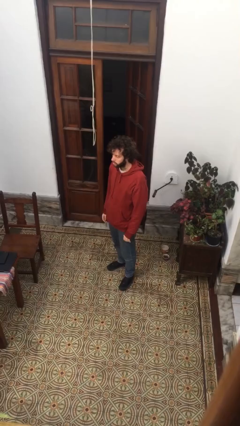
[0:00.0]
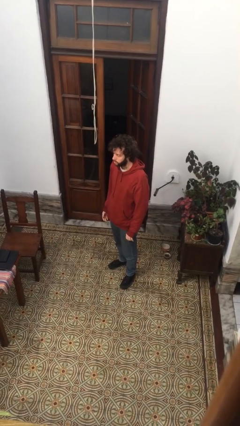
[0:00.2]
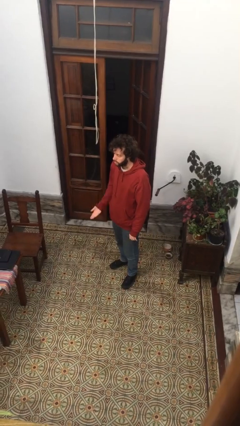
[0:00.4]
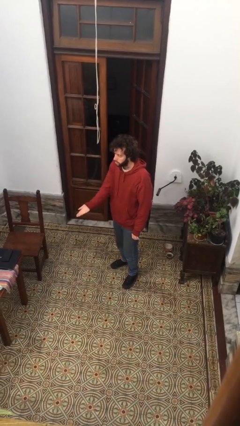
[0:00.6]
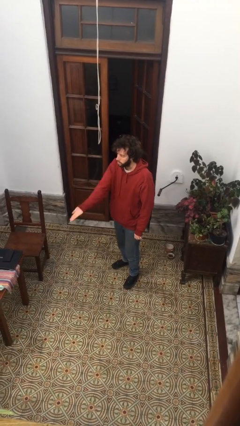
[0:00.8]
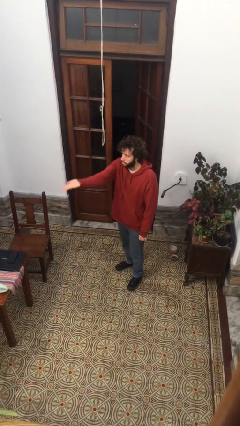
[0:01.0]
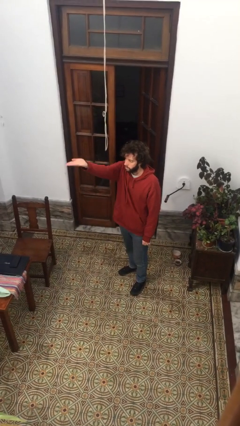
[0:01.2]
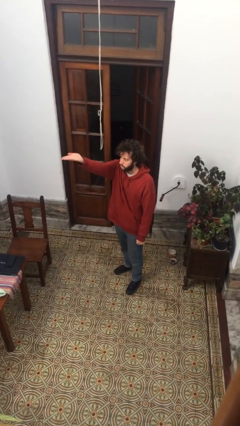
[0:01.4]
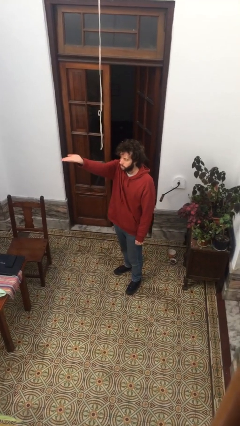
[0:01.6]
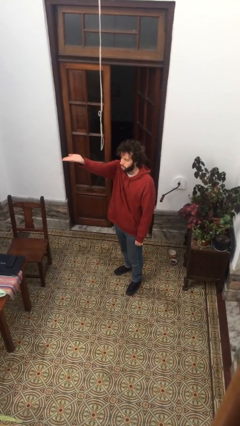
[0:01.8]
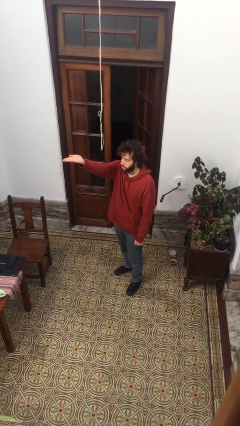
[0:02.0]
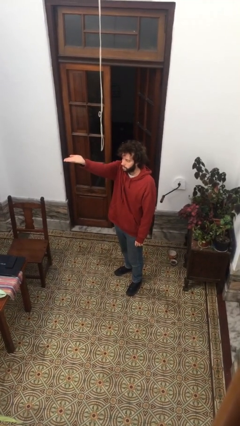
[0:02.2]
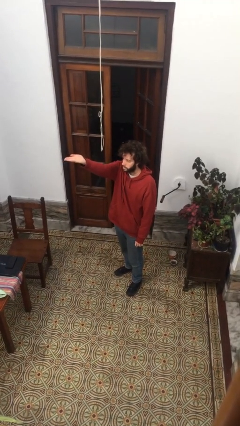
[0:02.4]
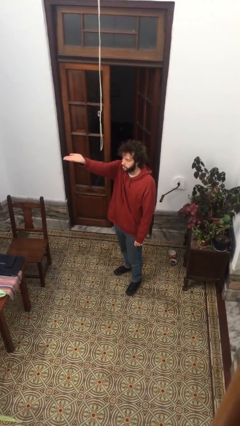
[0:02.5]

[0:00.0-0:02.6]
person gestures swipe up

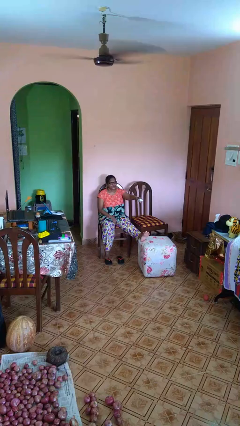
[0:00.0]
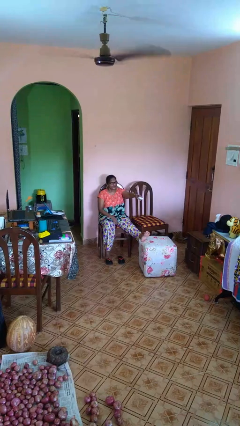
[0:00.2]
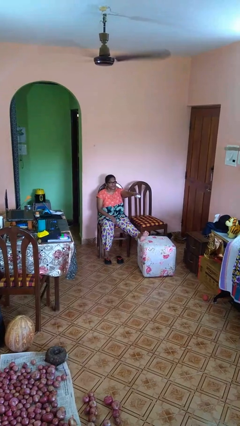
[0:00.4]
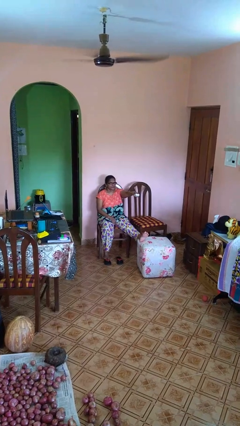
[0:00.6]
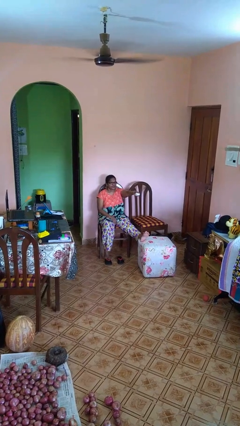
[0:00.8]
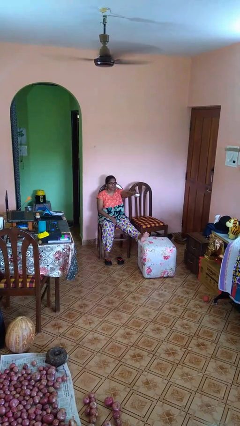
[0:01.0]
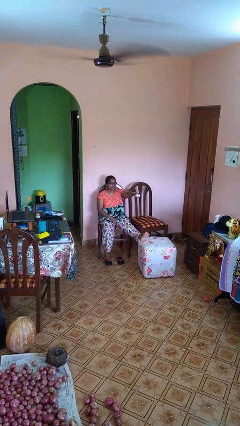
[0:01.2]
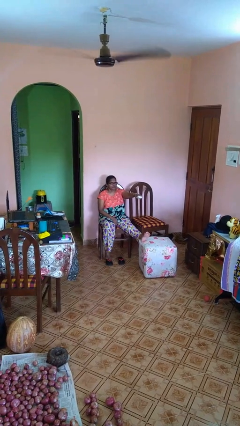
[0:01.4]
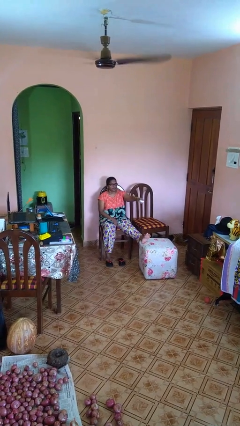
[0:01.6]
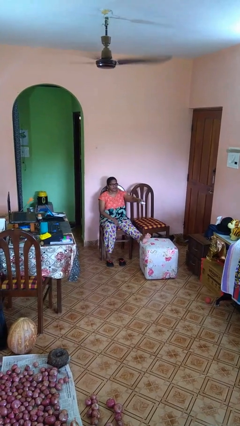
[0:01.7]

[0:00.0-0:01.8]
person uses television remote

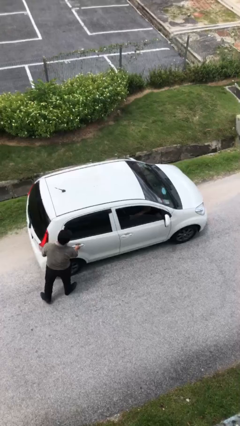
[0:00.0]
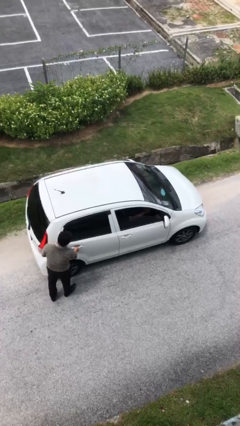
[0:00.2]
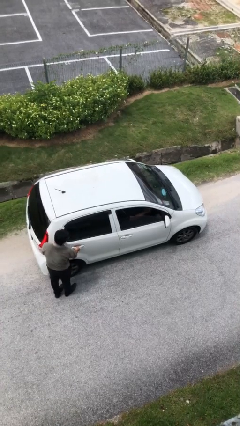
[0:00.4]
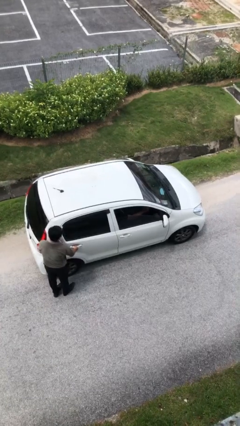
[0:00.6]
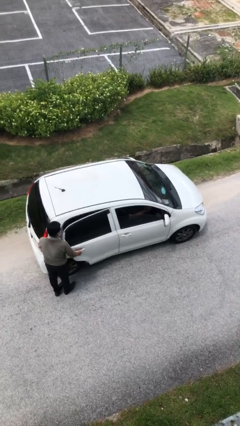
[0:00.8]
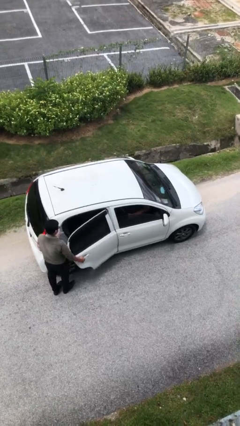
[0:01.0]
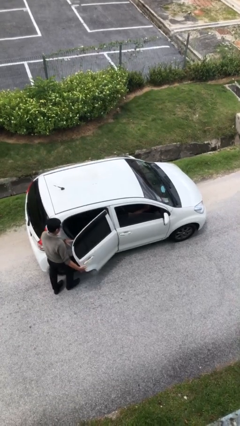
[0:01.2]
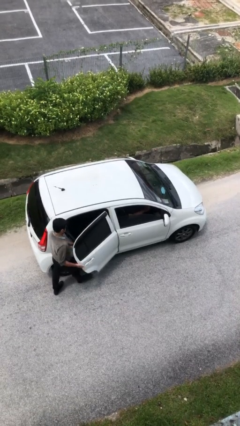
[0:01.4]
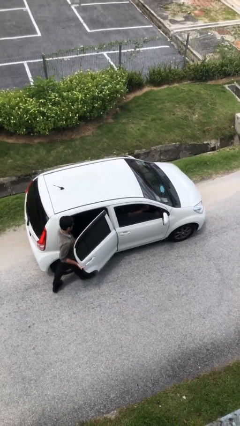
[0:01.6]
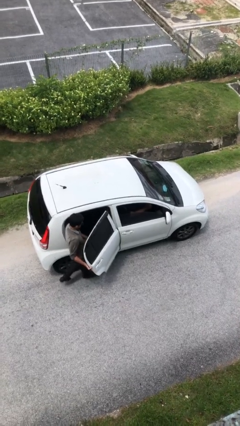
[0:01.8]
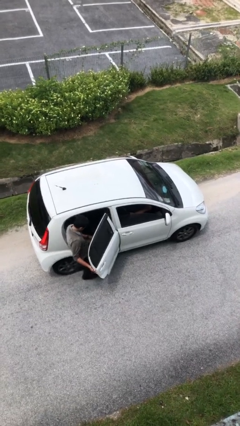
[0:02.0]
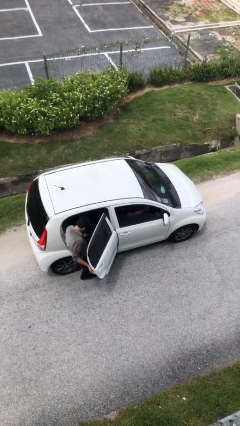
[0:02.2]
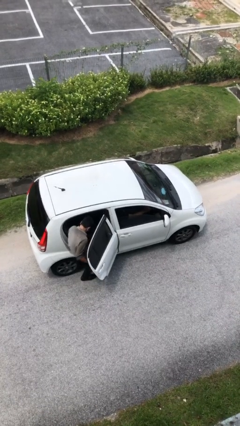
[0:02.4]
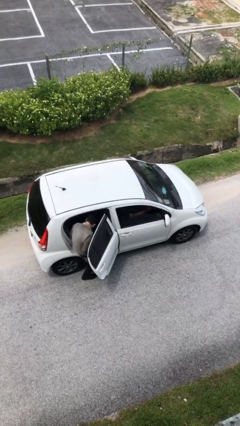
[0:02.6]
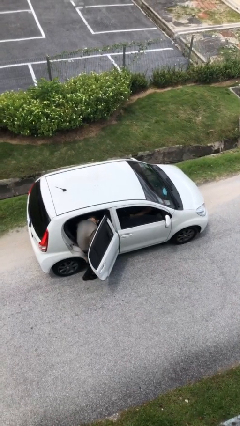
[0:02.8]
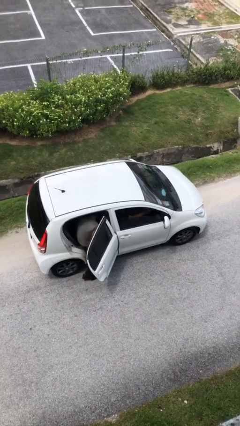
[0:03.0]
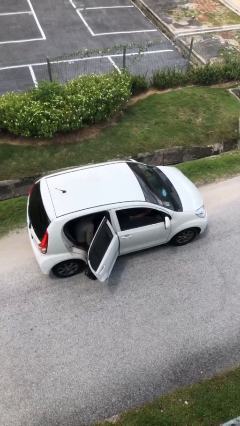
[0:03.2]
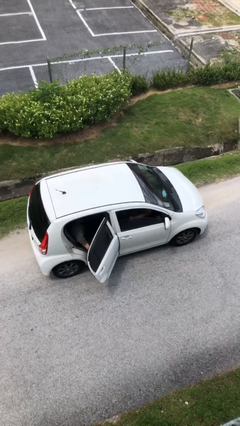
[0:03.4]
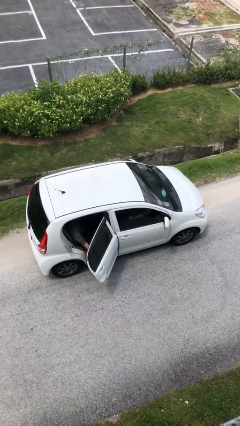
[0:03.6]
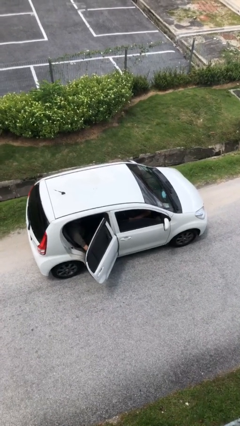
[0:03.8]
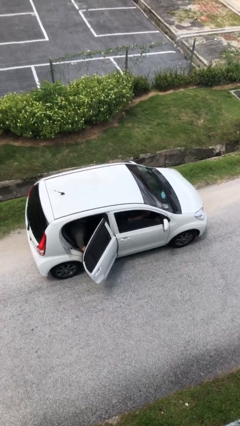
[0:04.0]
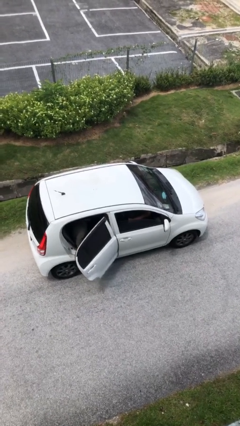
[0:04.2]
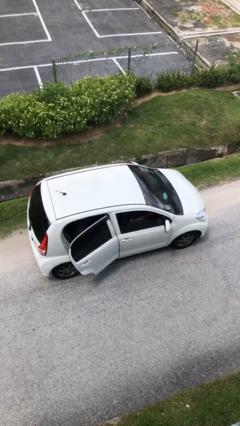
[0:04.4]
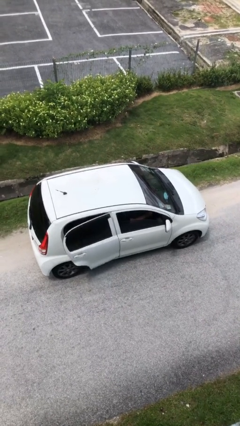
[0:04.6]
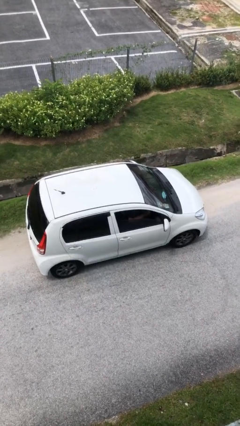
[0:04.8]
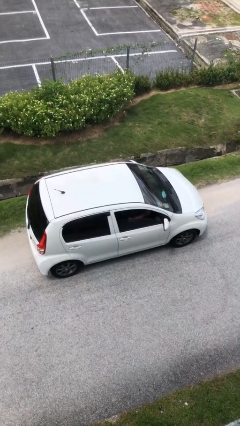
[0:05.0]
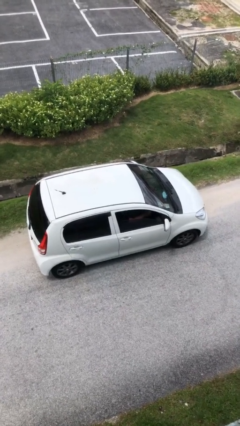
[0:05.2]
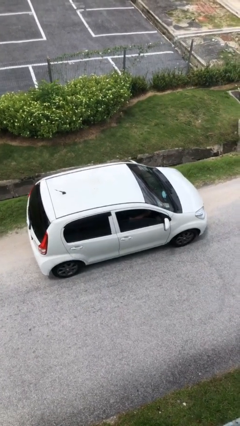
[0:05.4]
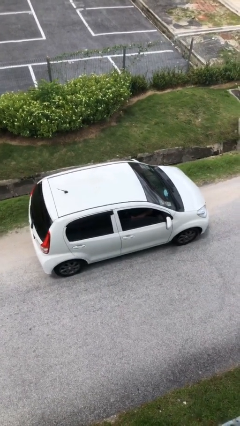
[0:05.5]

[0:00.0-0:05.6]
car picks up person

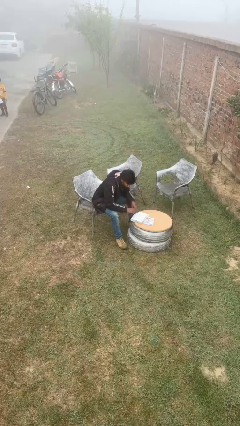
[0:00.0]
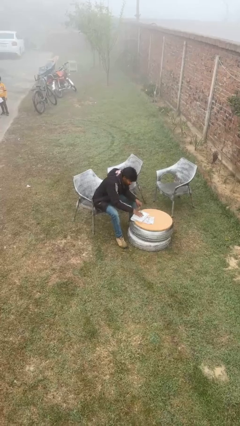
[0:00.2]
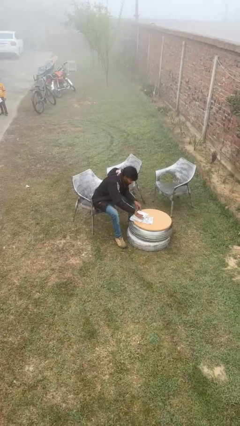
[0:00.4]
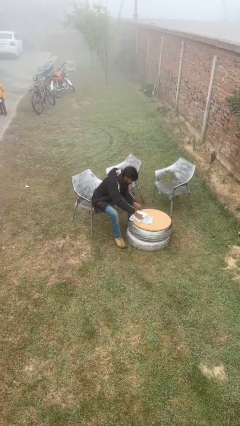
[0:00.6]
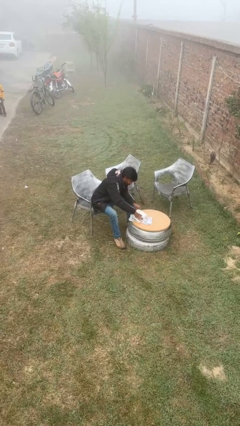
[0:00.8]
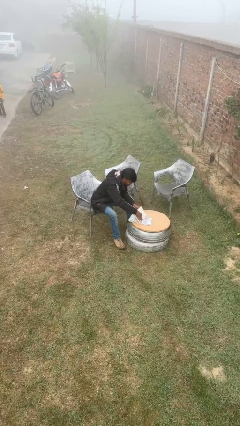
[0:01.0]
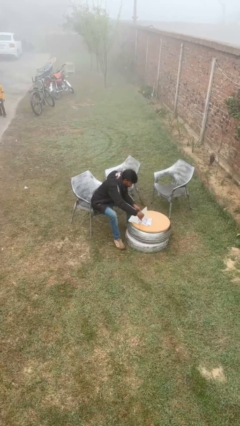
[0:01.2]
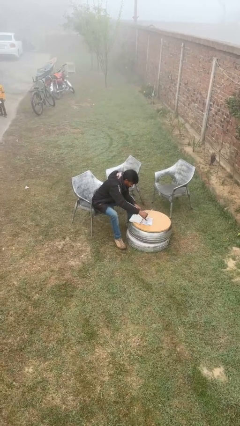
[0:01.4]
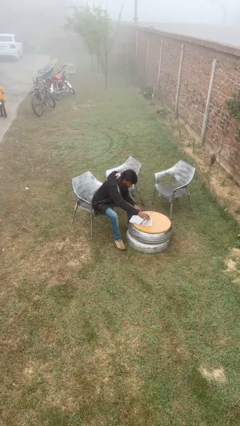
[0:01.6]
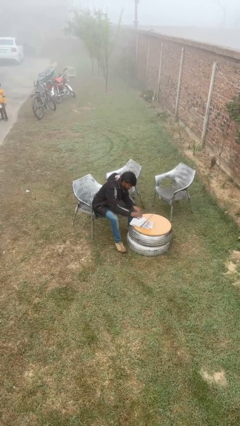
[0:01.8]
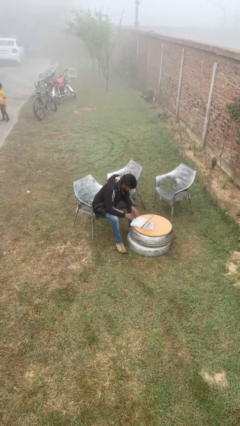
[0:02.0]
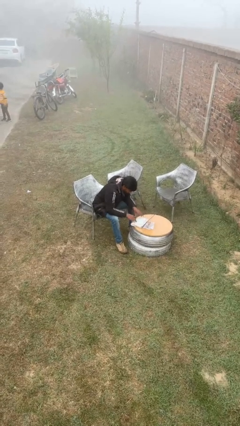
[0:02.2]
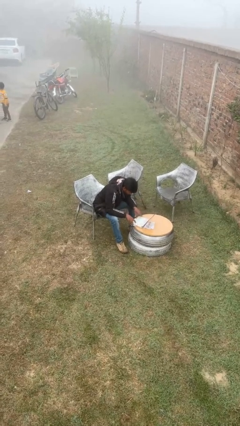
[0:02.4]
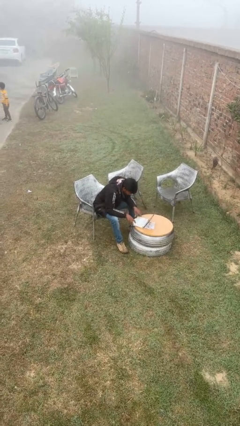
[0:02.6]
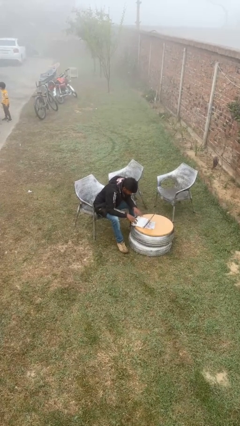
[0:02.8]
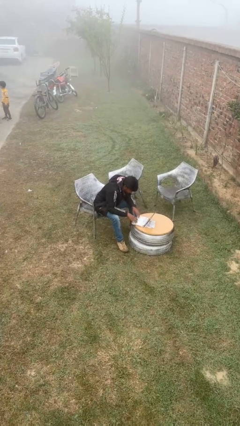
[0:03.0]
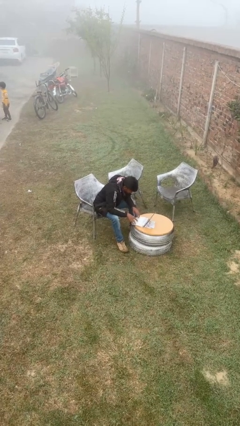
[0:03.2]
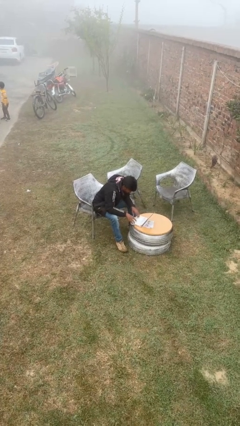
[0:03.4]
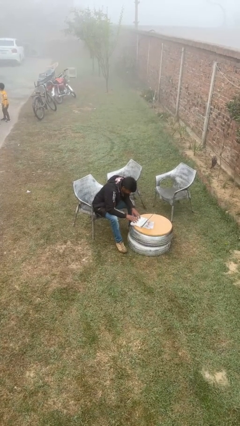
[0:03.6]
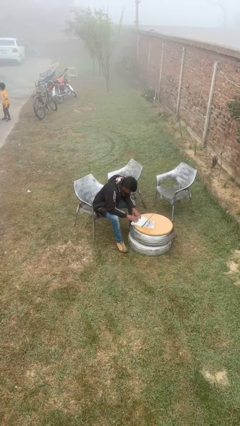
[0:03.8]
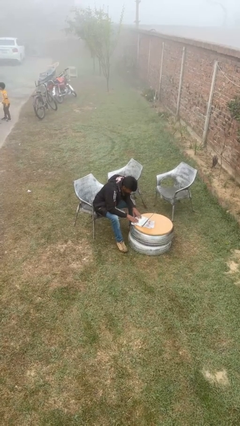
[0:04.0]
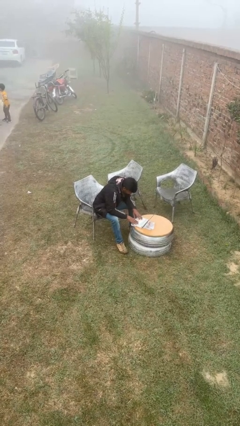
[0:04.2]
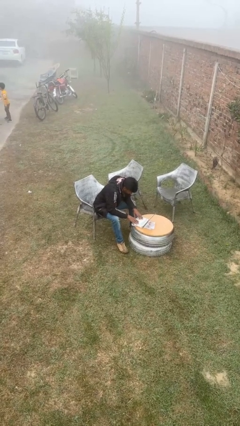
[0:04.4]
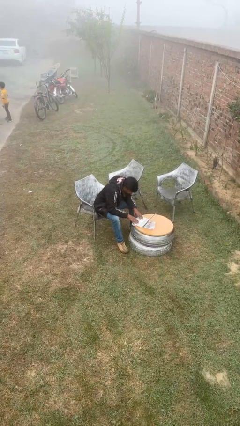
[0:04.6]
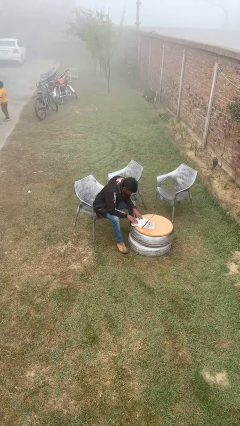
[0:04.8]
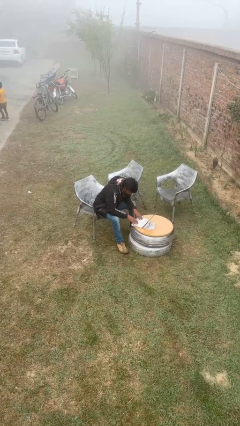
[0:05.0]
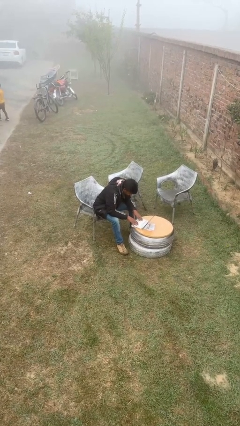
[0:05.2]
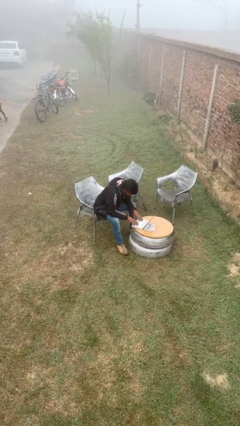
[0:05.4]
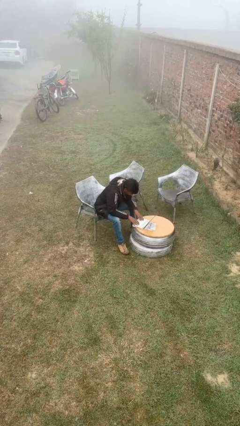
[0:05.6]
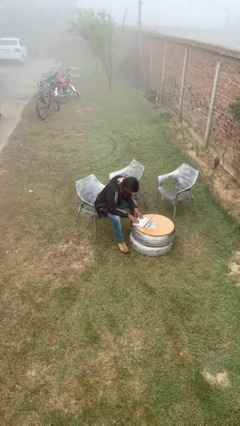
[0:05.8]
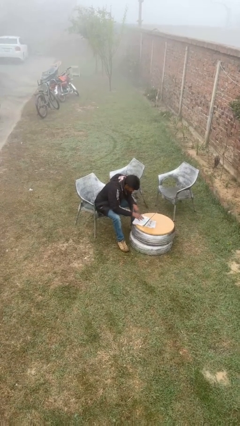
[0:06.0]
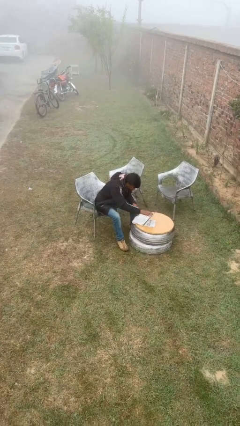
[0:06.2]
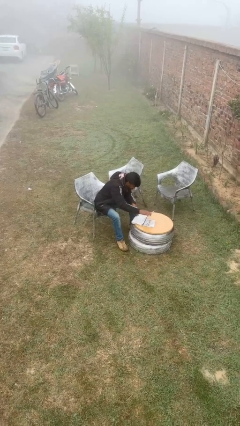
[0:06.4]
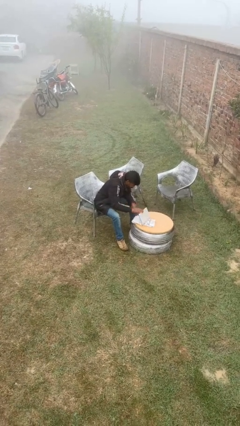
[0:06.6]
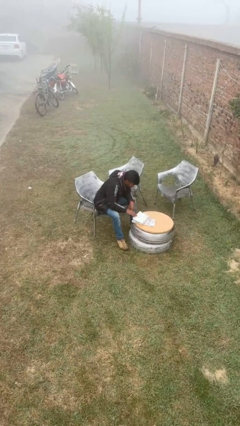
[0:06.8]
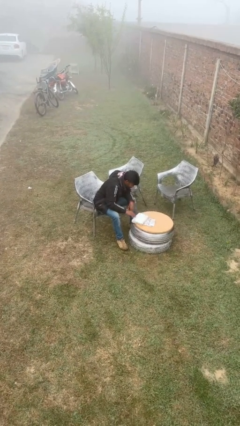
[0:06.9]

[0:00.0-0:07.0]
person interacts with laptop

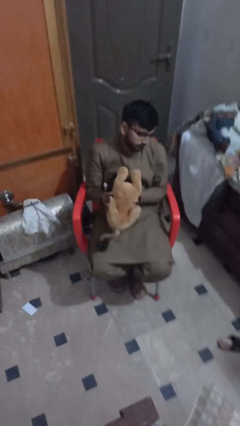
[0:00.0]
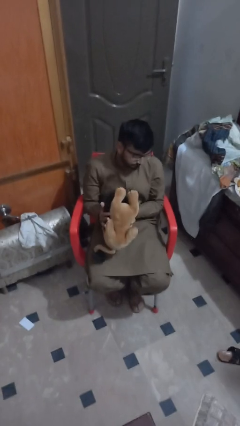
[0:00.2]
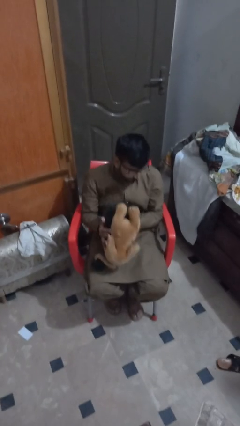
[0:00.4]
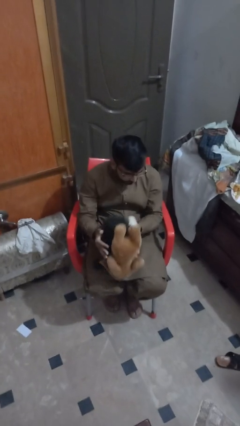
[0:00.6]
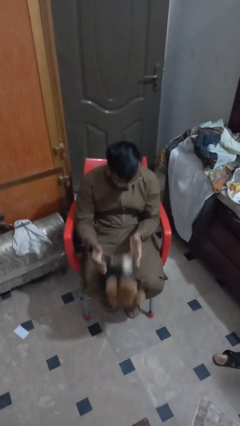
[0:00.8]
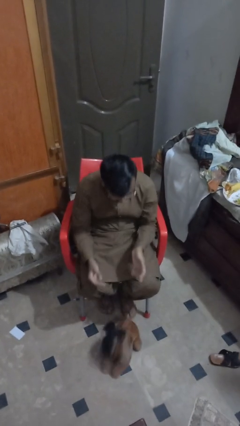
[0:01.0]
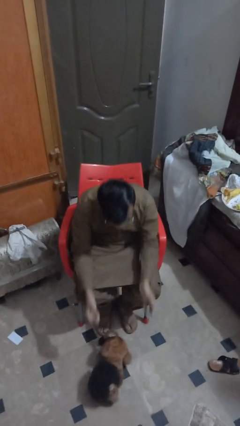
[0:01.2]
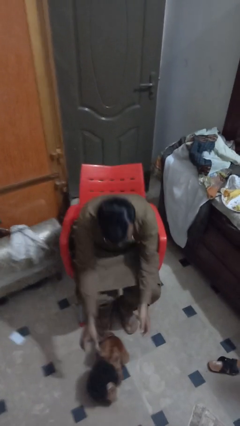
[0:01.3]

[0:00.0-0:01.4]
person catches dropped object
